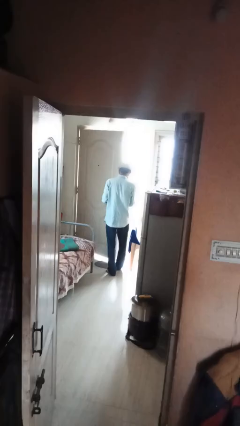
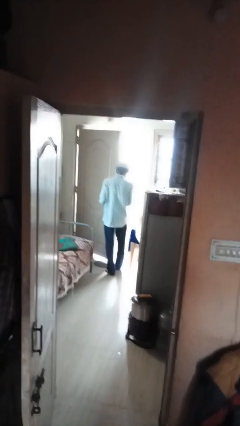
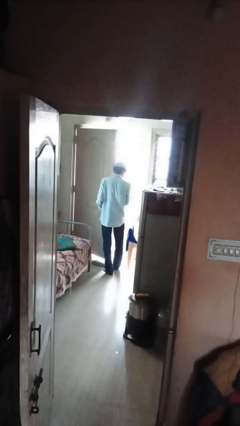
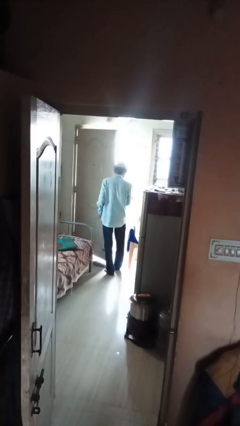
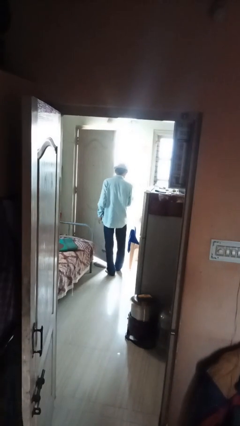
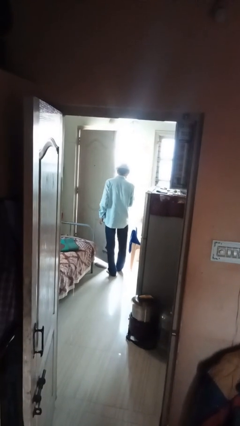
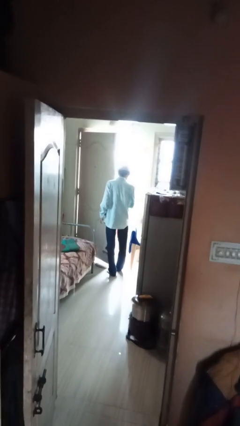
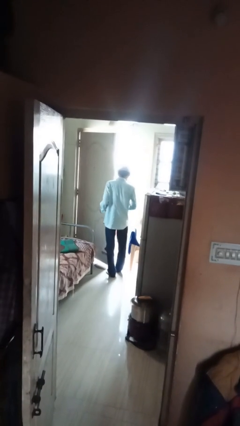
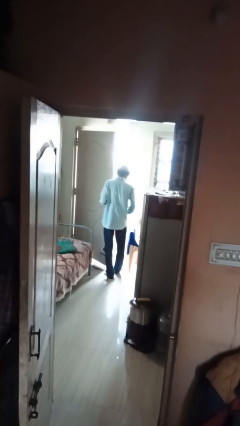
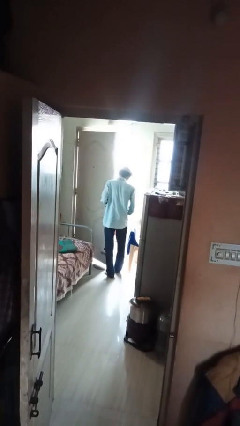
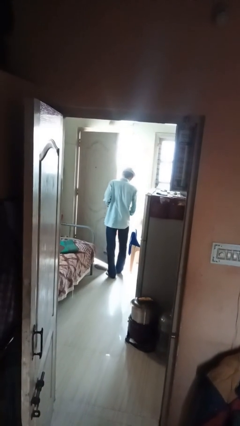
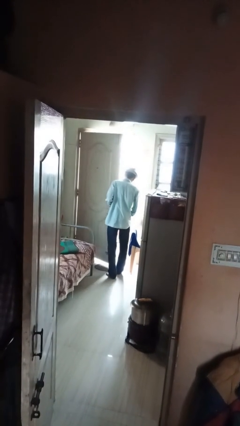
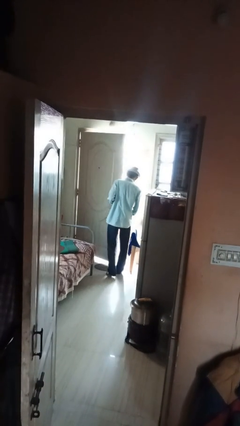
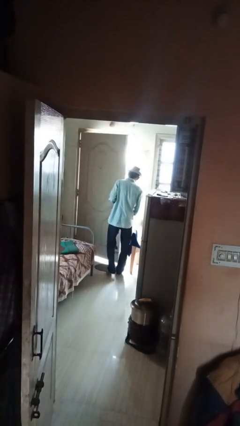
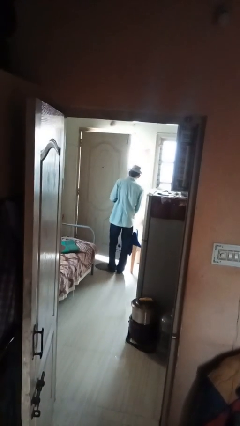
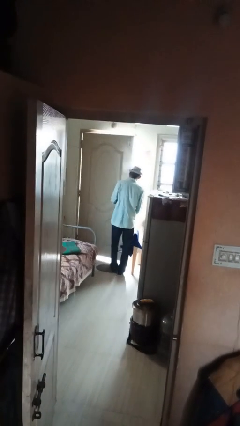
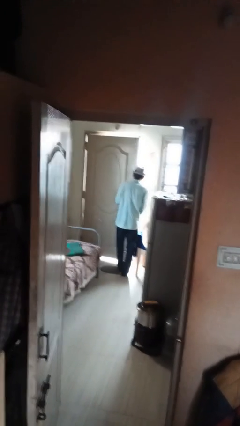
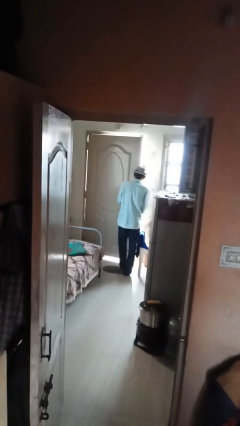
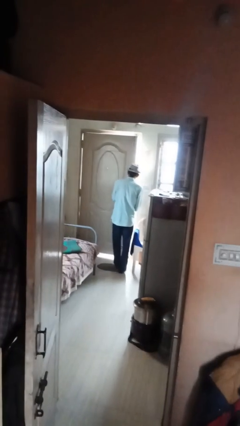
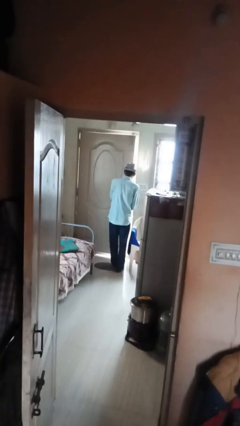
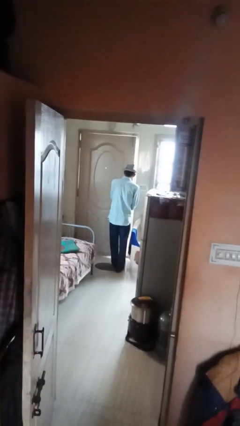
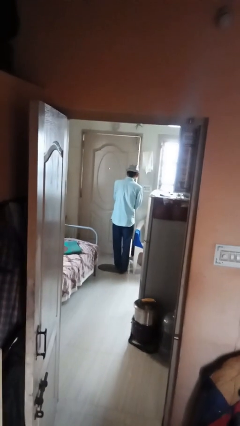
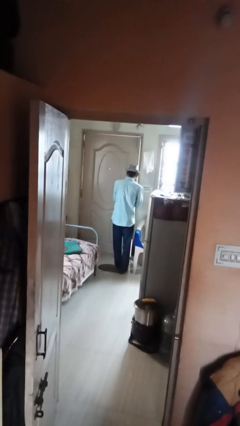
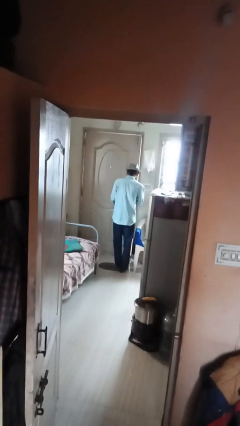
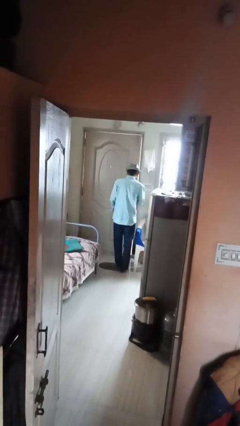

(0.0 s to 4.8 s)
person opens facility door

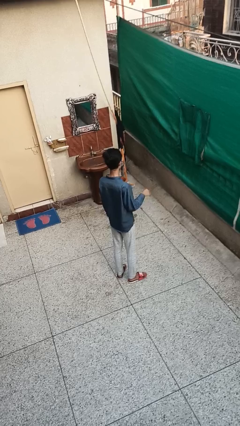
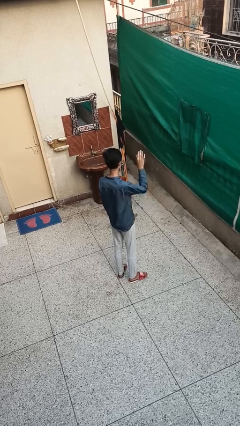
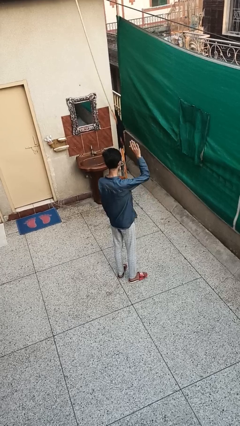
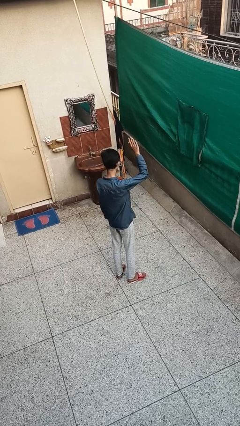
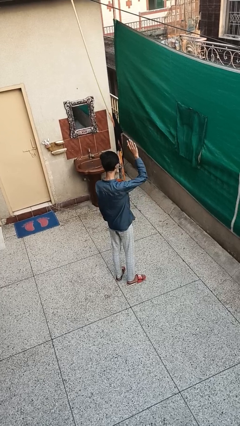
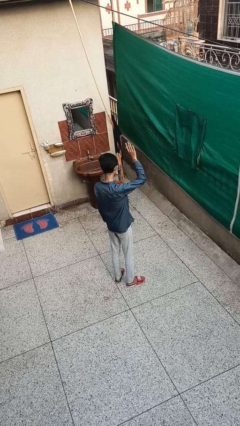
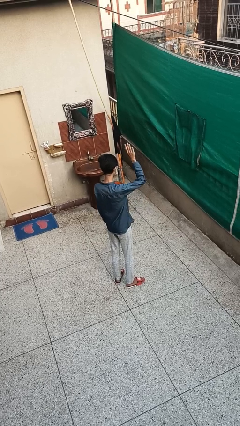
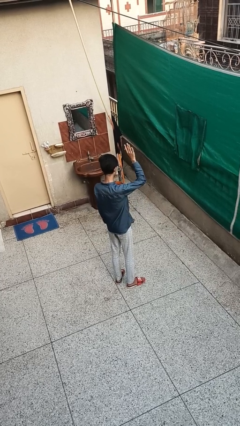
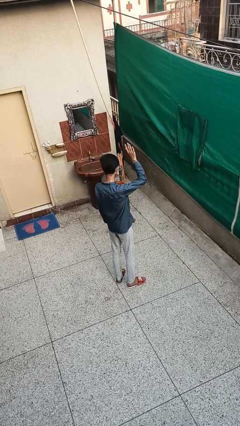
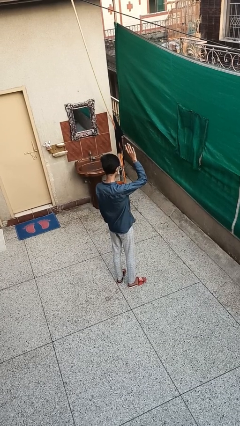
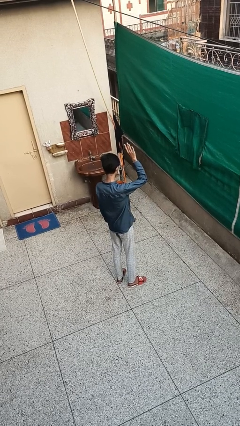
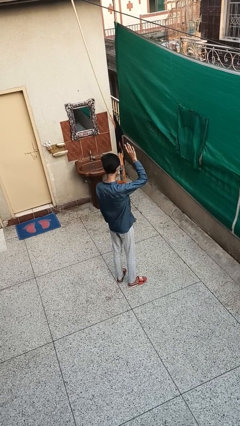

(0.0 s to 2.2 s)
person gestures raise hand

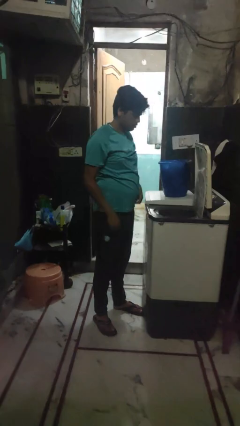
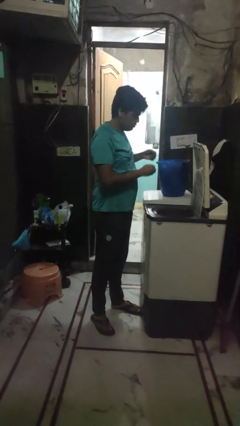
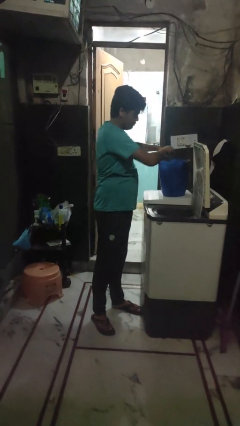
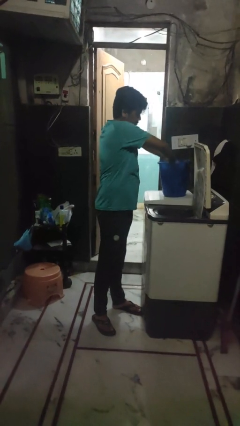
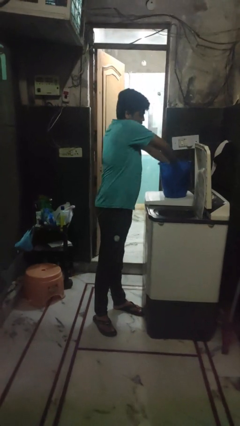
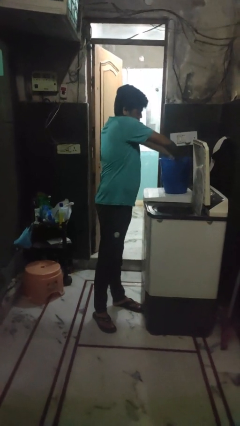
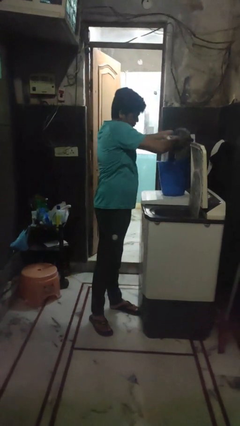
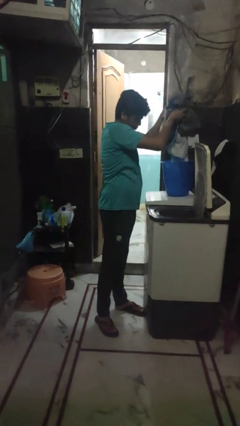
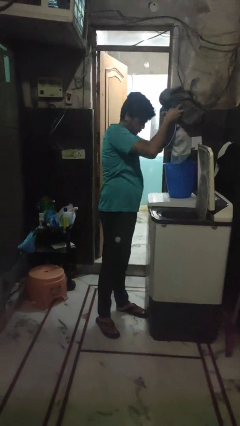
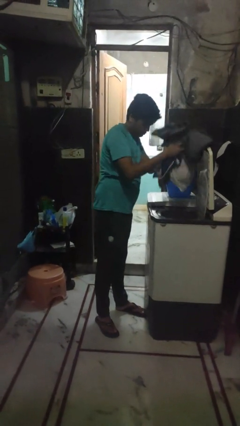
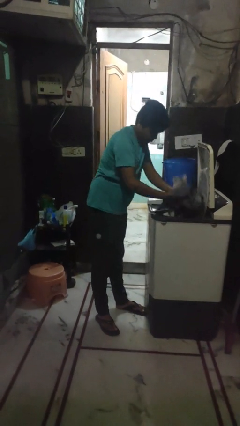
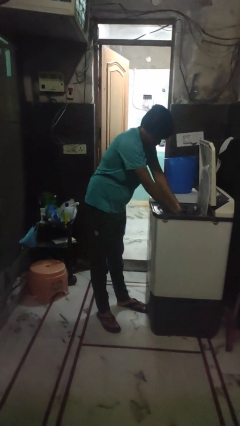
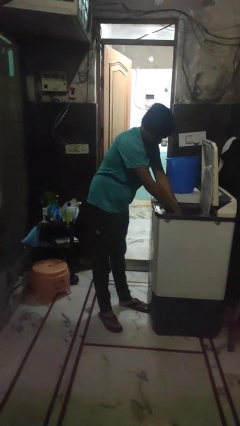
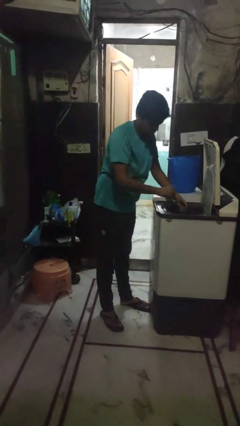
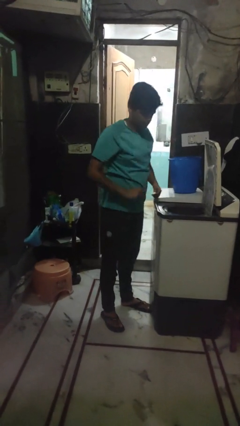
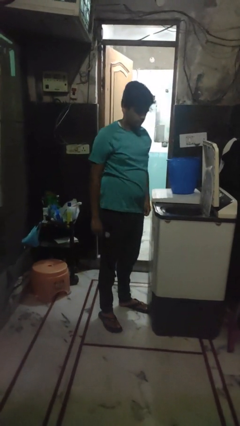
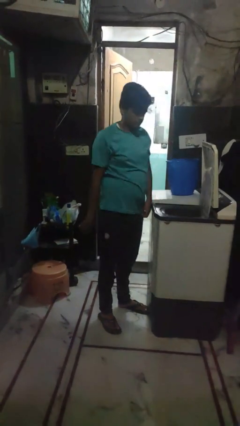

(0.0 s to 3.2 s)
person loads clotheswasher

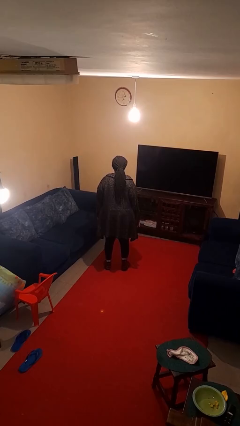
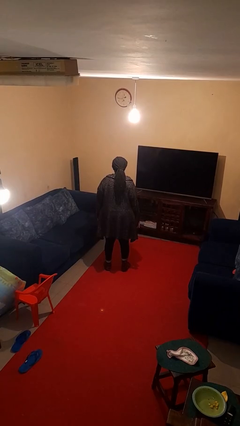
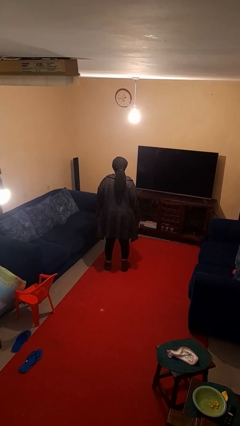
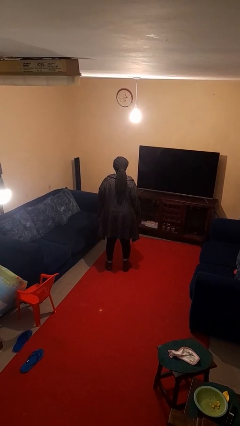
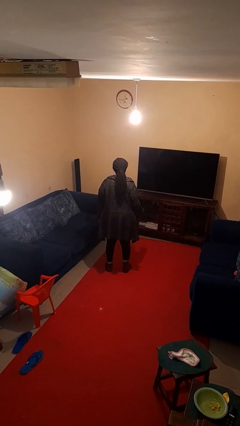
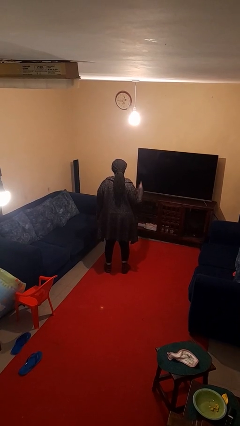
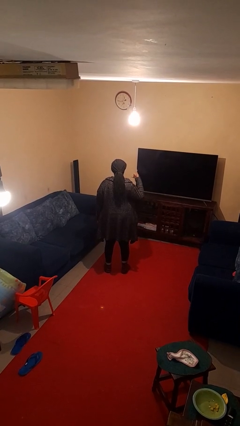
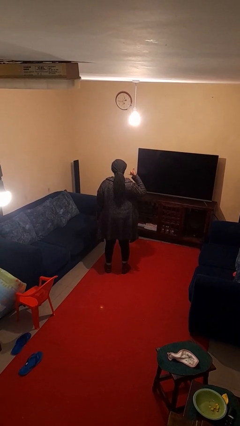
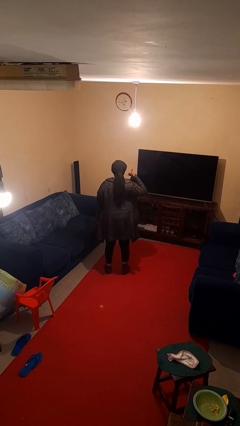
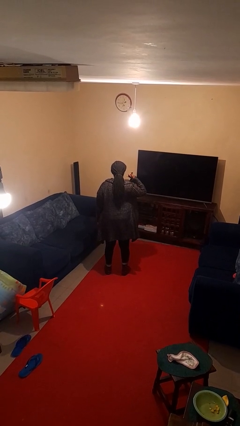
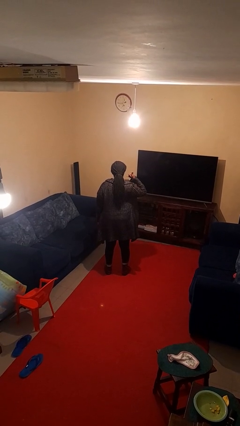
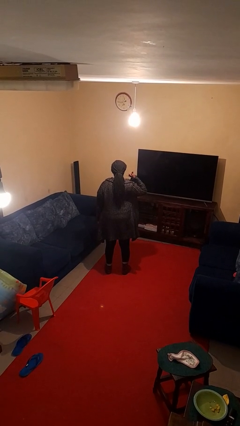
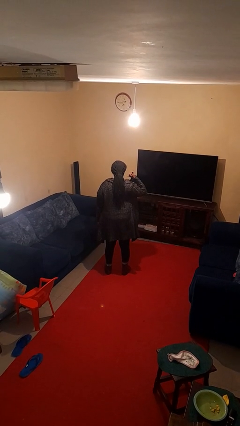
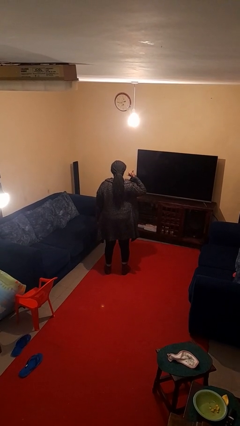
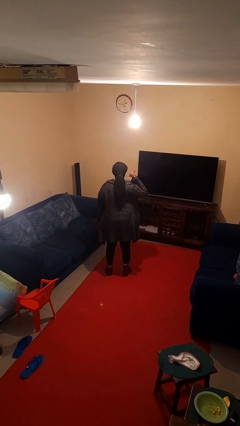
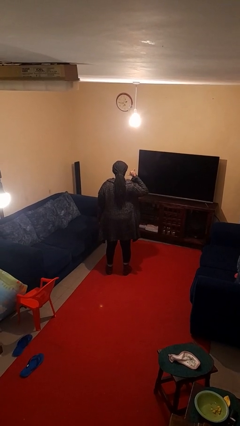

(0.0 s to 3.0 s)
person gestures call me

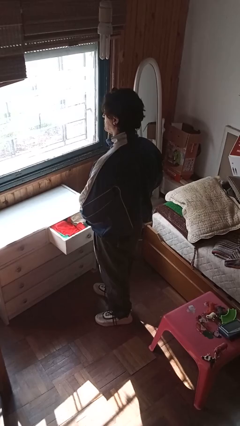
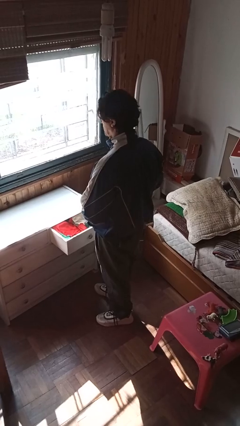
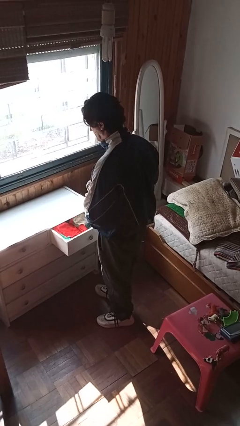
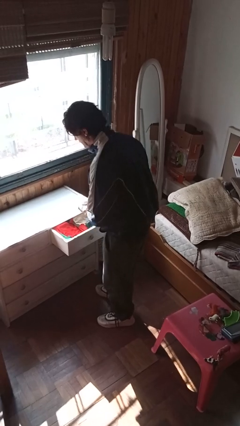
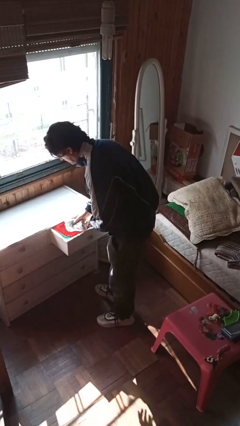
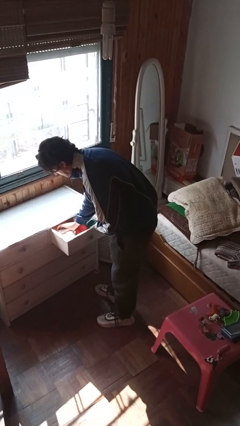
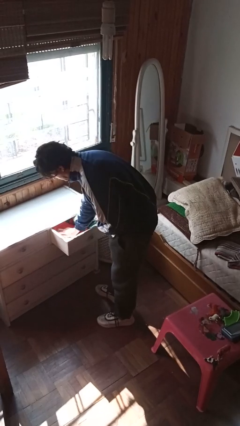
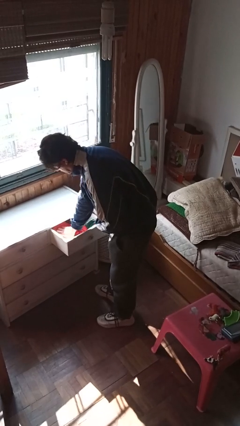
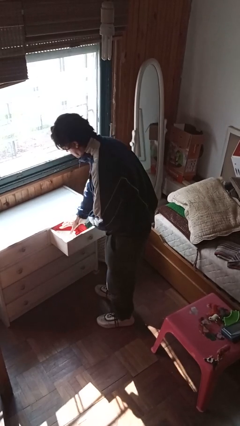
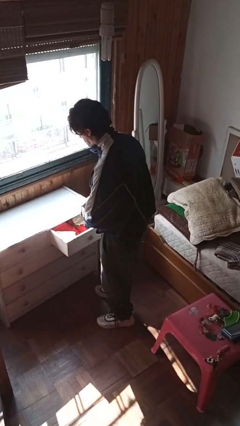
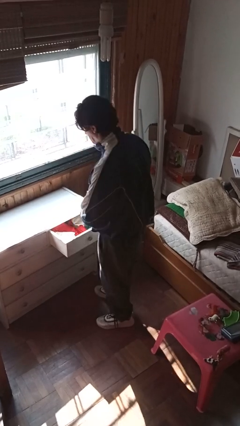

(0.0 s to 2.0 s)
person puts clothes into dresser

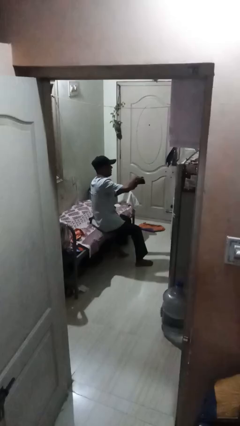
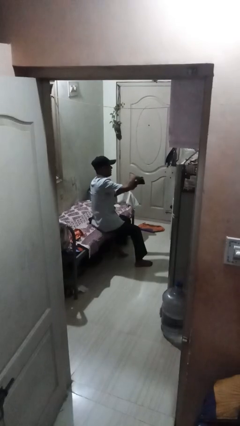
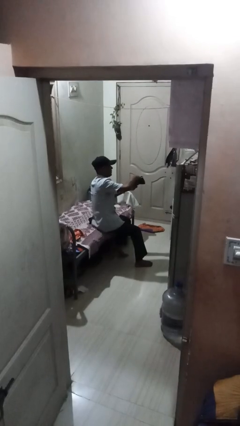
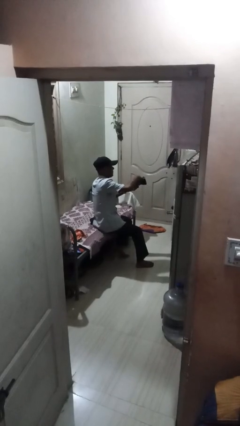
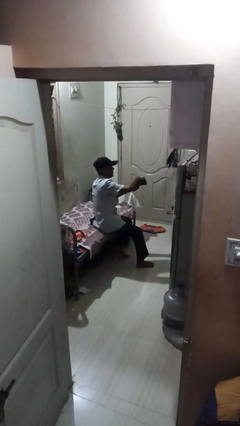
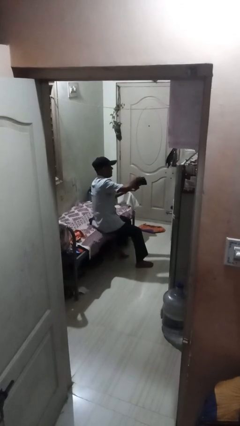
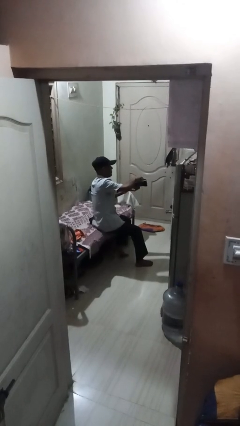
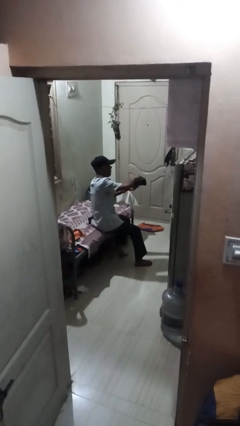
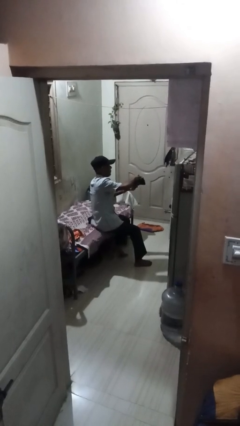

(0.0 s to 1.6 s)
person searches in purse

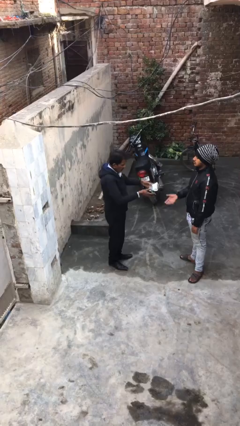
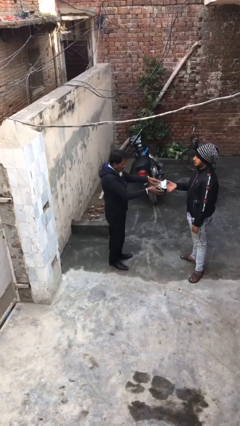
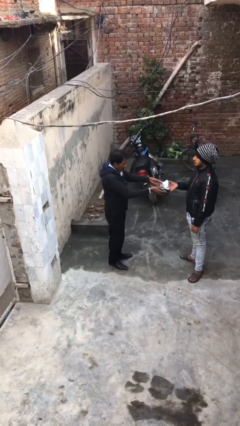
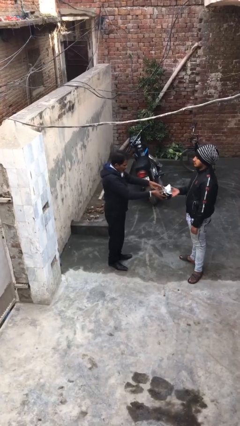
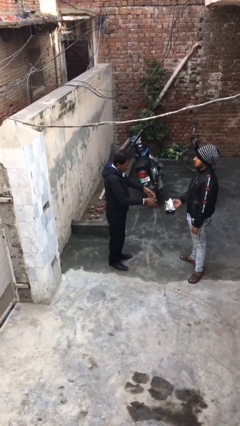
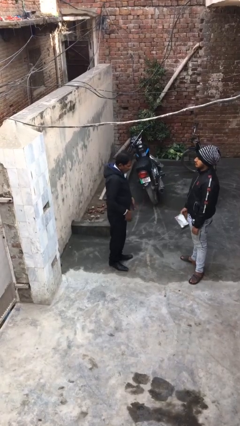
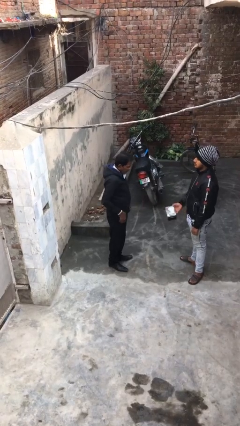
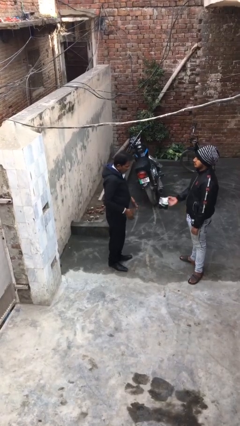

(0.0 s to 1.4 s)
person transfers object to person
